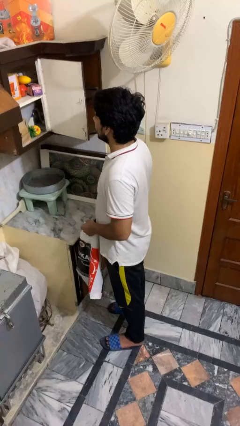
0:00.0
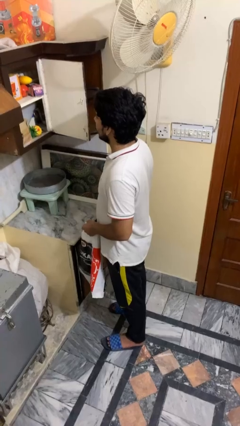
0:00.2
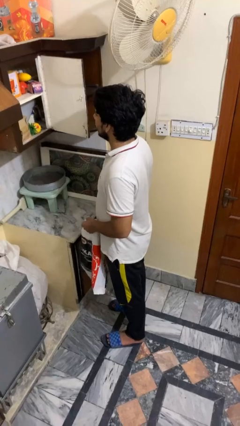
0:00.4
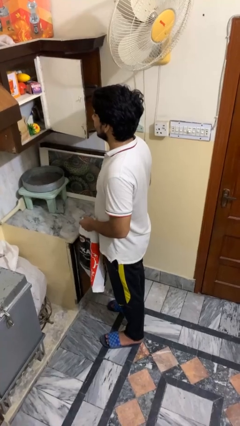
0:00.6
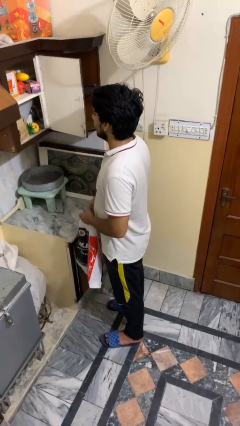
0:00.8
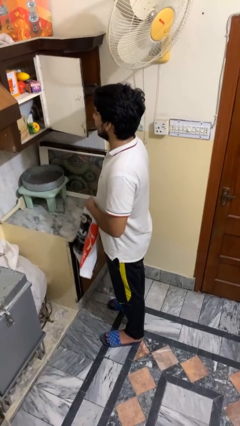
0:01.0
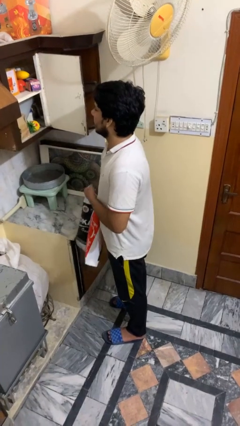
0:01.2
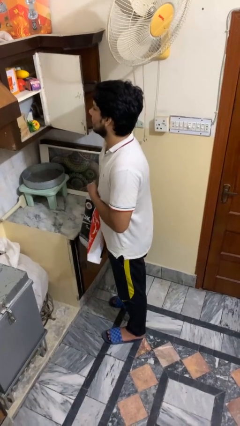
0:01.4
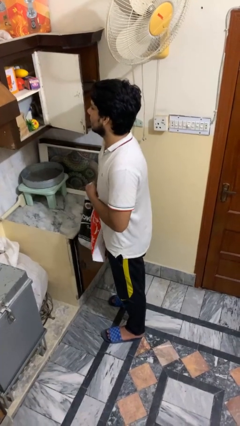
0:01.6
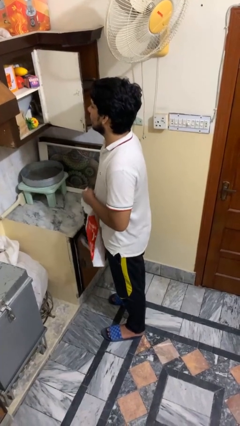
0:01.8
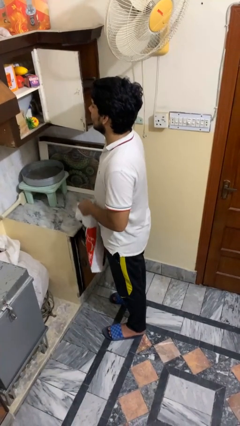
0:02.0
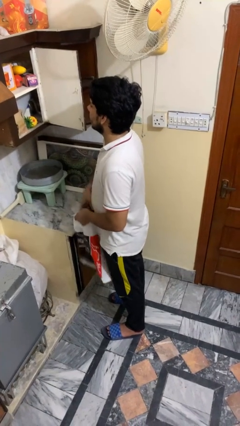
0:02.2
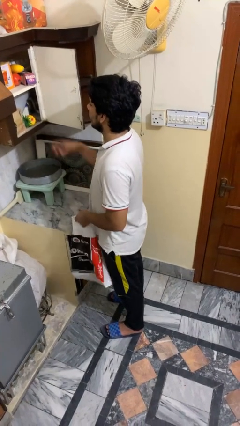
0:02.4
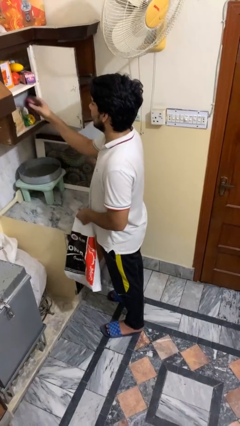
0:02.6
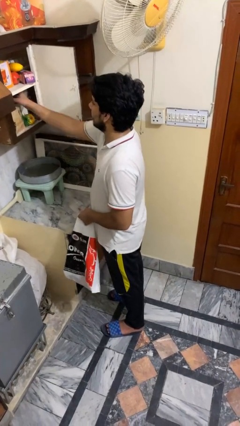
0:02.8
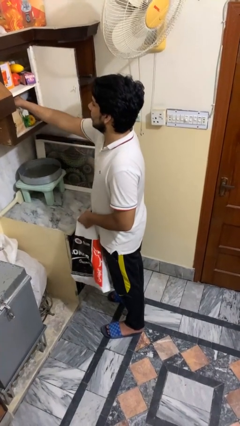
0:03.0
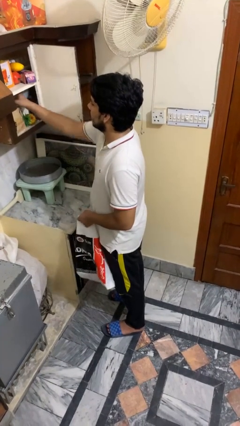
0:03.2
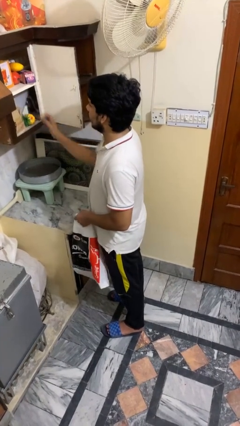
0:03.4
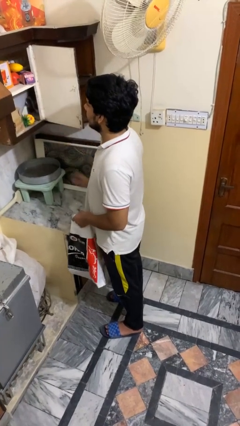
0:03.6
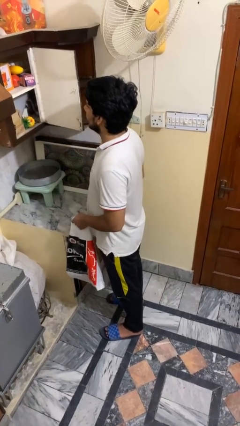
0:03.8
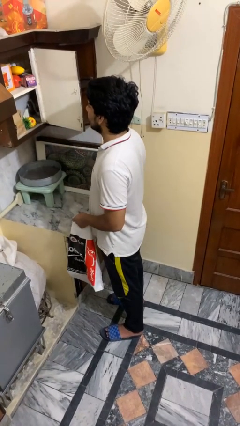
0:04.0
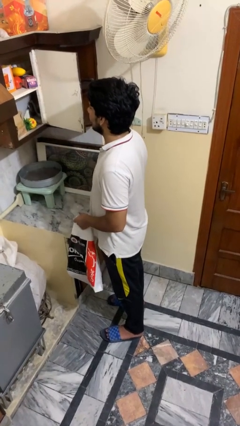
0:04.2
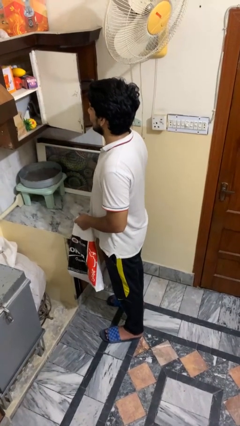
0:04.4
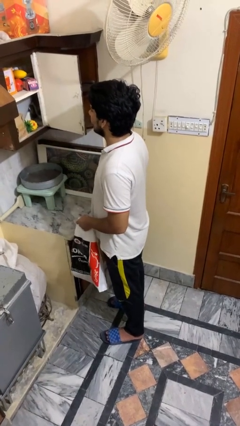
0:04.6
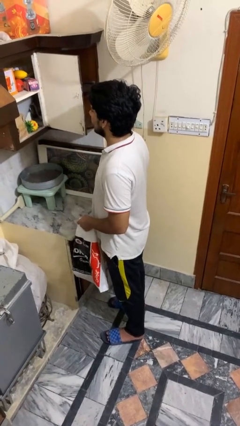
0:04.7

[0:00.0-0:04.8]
person loads groceries into cabinet

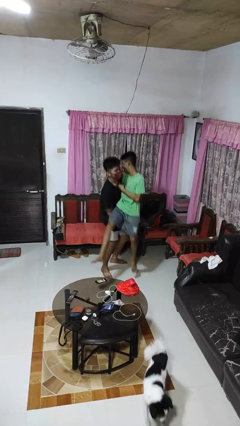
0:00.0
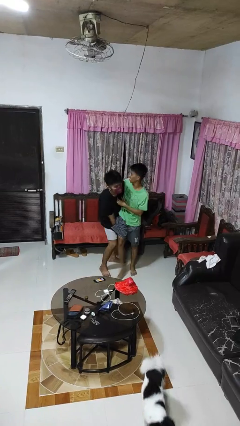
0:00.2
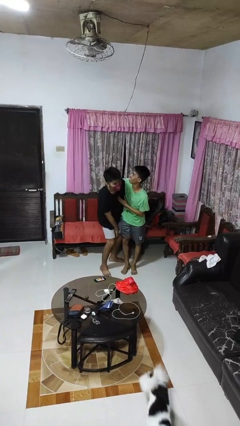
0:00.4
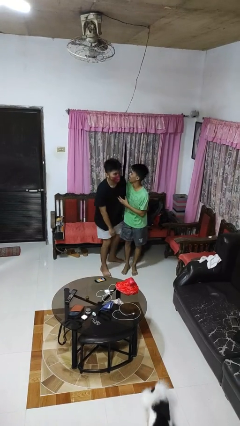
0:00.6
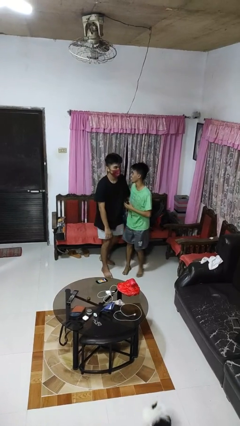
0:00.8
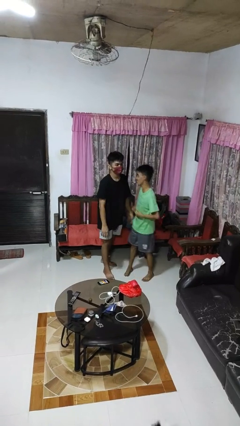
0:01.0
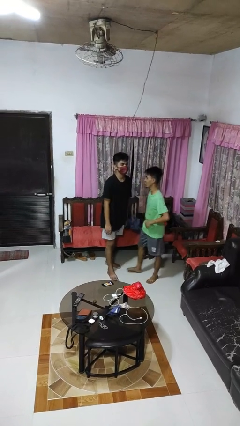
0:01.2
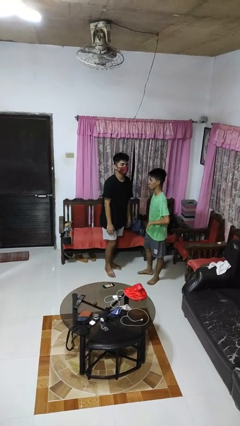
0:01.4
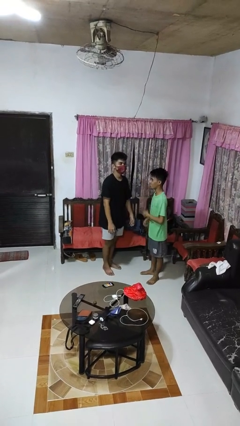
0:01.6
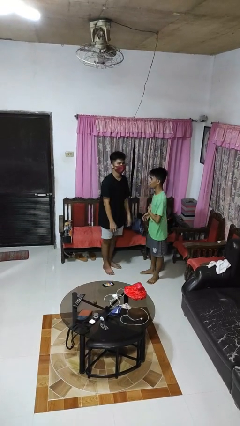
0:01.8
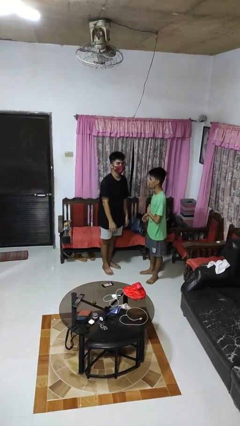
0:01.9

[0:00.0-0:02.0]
person puts down person

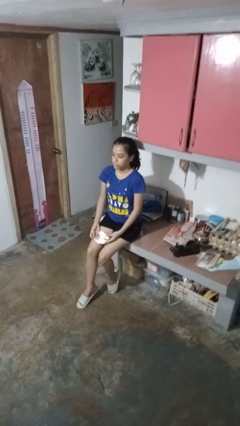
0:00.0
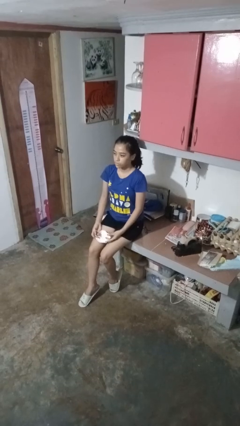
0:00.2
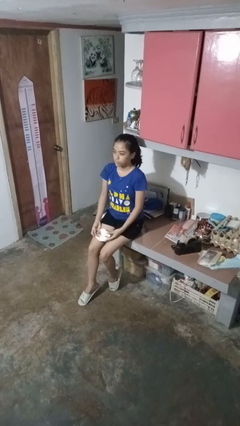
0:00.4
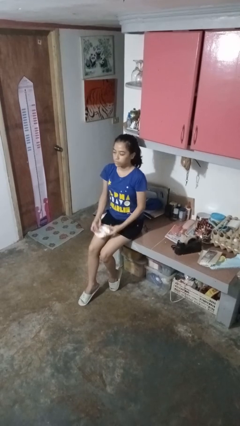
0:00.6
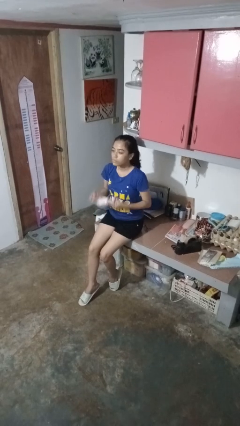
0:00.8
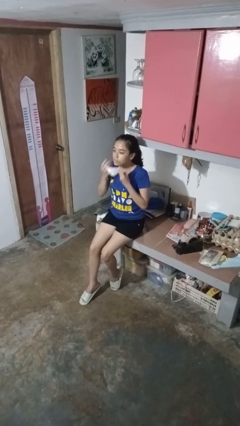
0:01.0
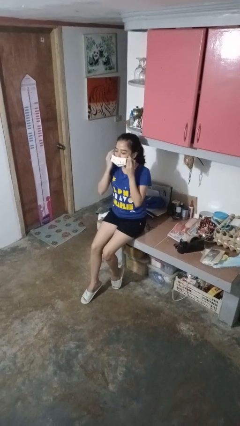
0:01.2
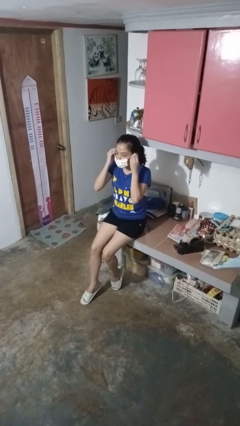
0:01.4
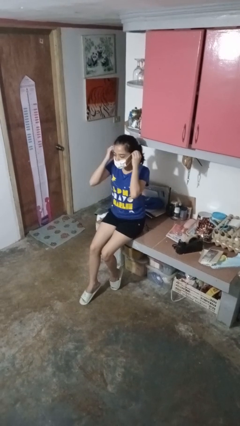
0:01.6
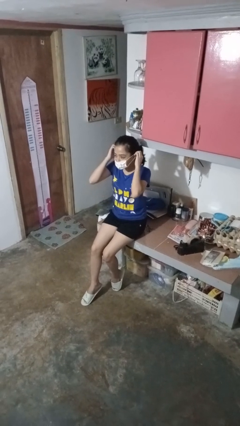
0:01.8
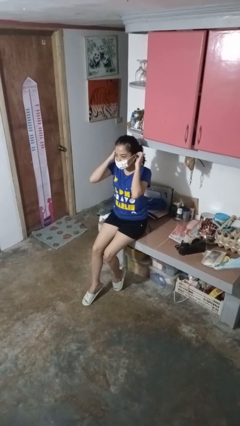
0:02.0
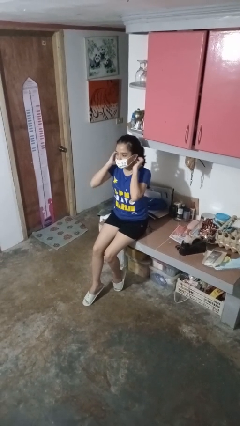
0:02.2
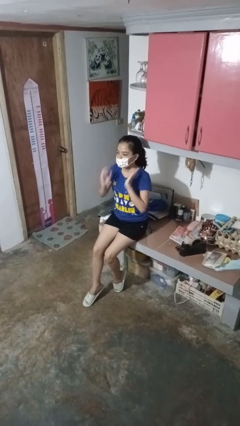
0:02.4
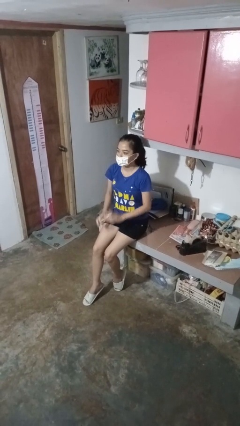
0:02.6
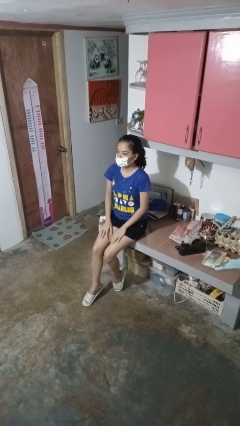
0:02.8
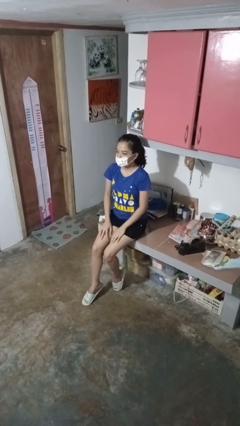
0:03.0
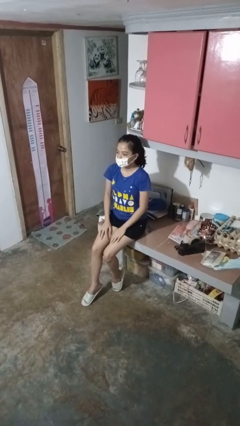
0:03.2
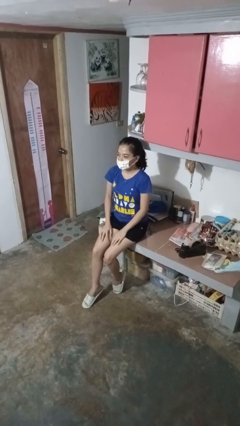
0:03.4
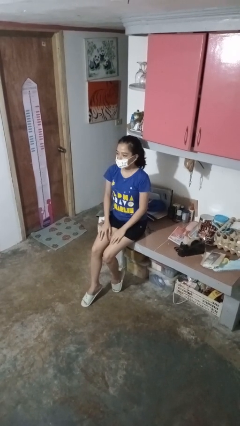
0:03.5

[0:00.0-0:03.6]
person puts on facemask

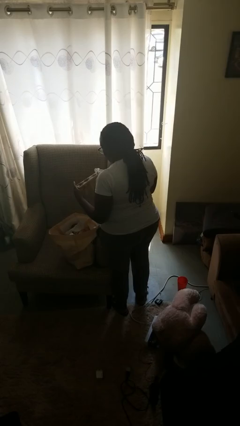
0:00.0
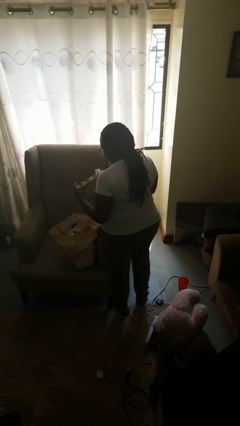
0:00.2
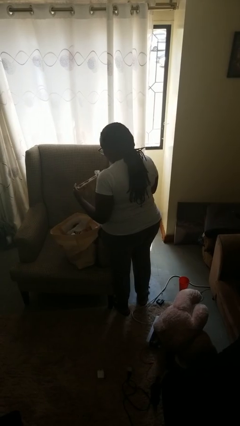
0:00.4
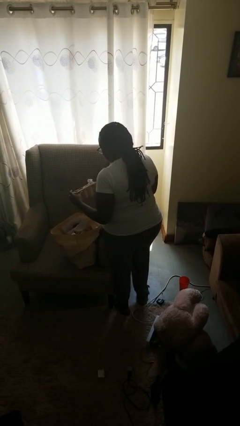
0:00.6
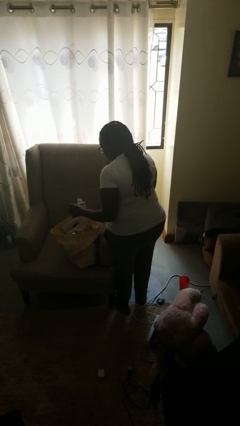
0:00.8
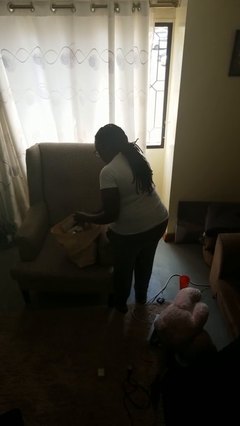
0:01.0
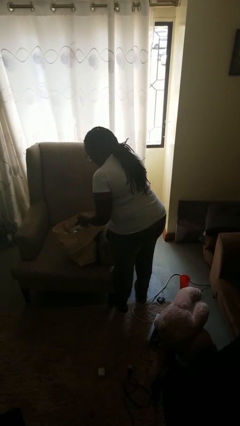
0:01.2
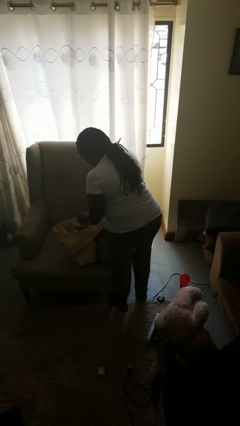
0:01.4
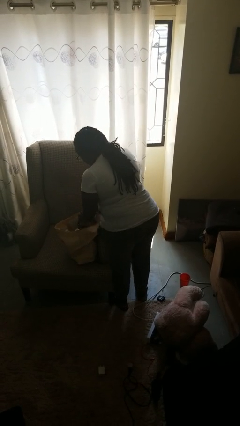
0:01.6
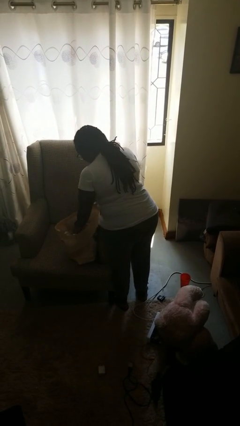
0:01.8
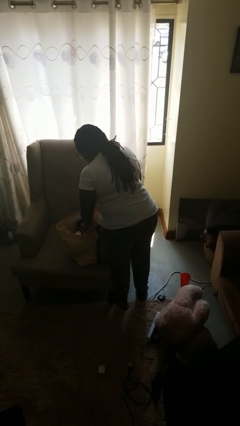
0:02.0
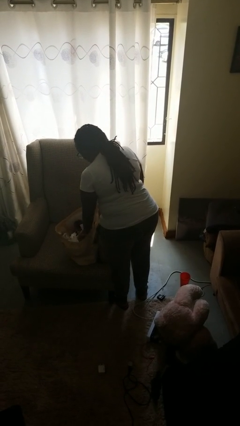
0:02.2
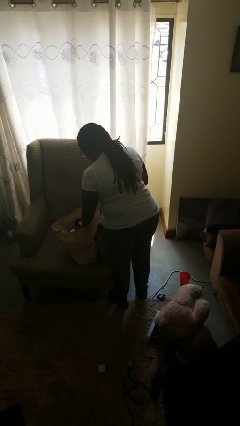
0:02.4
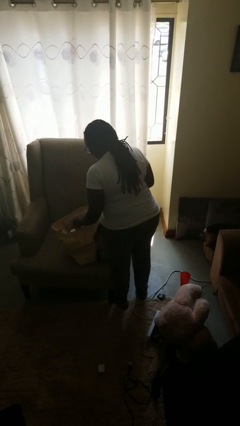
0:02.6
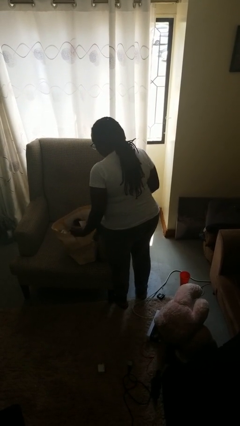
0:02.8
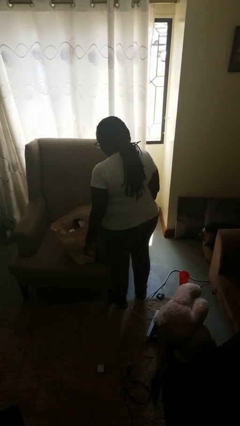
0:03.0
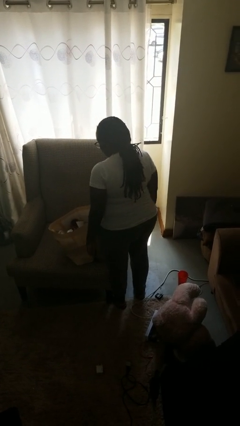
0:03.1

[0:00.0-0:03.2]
person puts object into bag

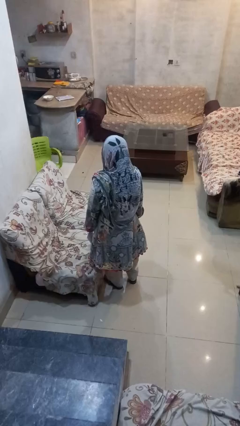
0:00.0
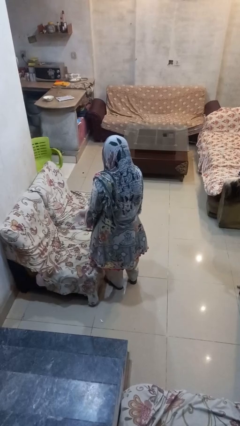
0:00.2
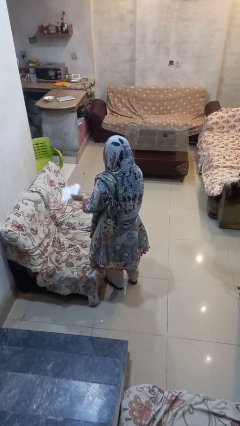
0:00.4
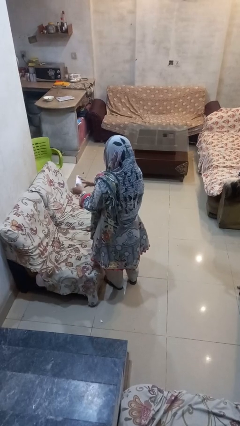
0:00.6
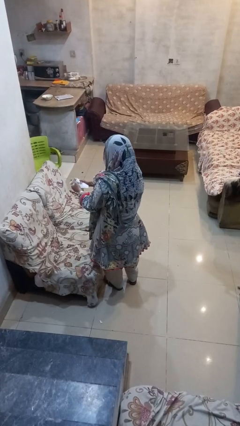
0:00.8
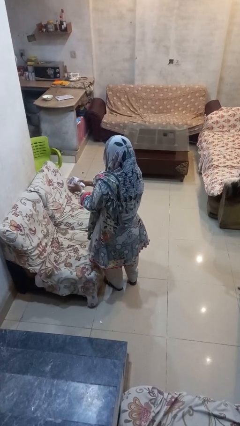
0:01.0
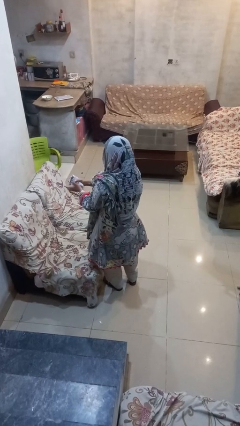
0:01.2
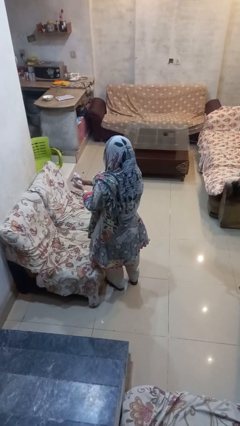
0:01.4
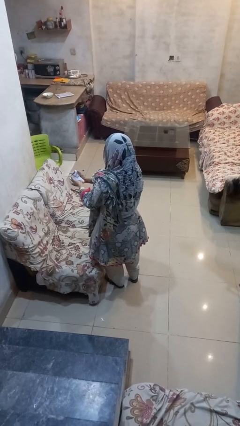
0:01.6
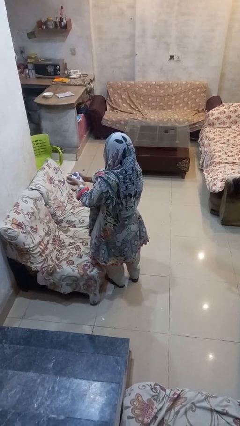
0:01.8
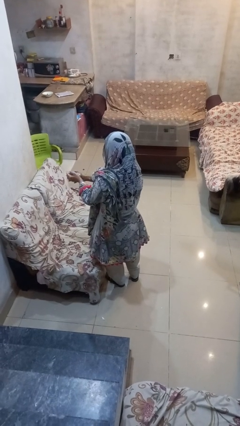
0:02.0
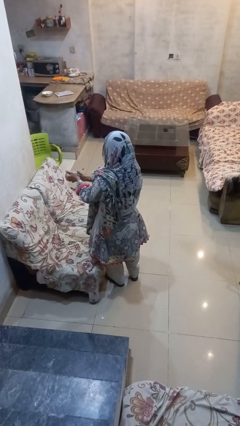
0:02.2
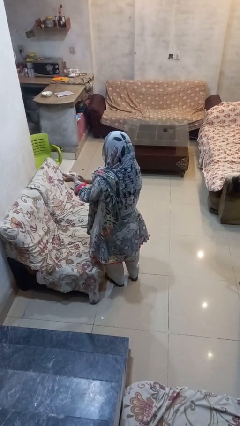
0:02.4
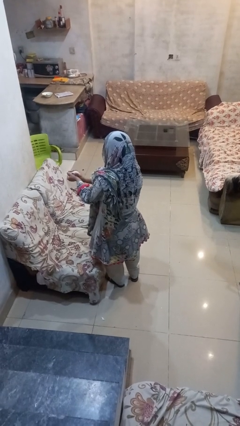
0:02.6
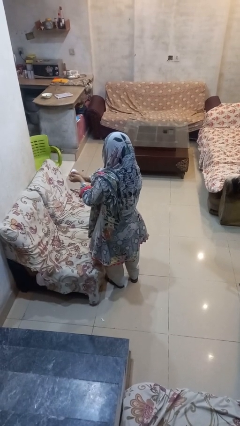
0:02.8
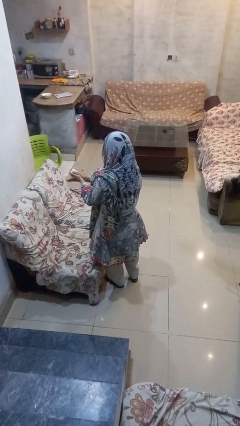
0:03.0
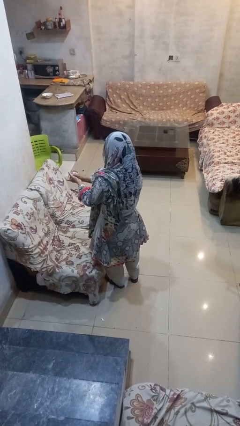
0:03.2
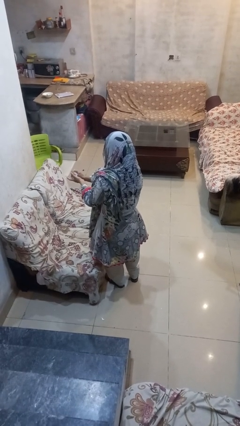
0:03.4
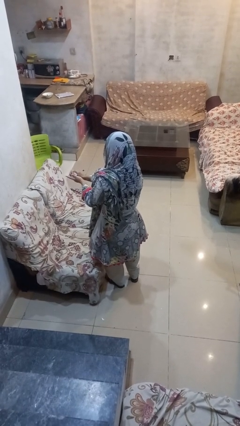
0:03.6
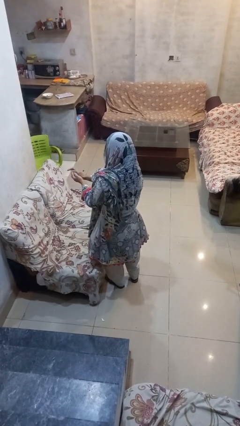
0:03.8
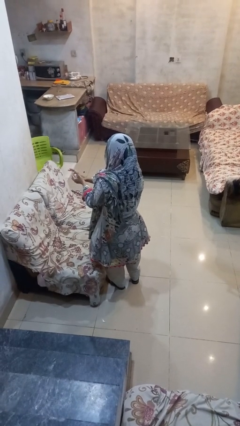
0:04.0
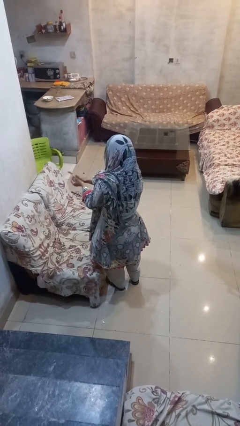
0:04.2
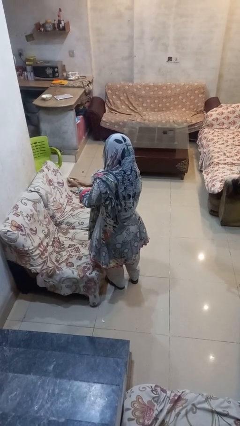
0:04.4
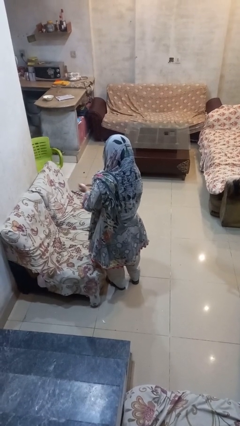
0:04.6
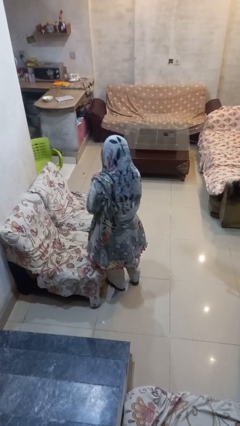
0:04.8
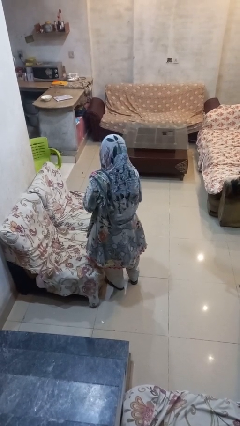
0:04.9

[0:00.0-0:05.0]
person crumples paper
